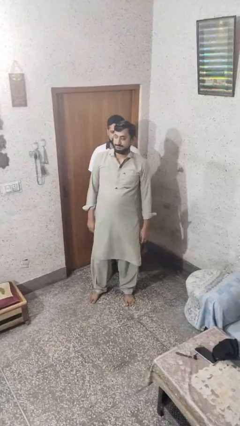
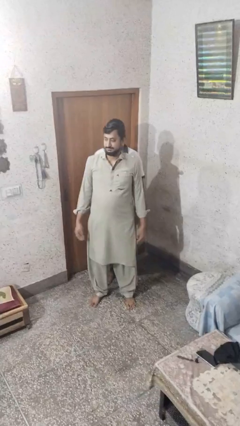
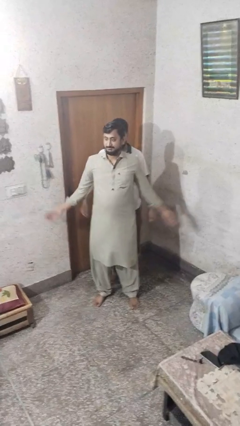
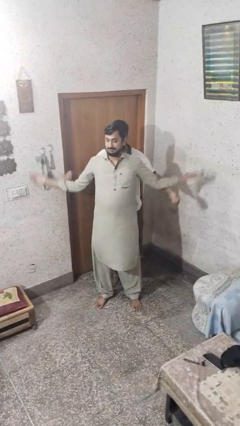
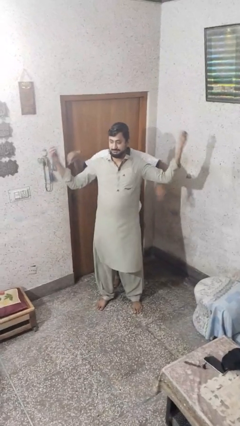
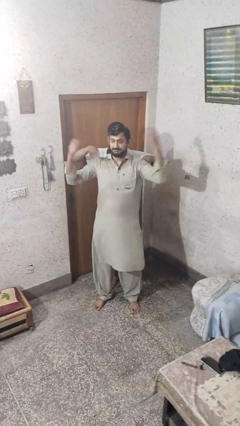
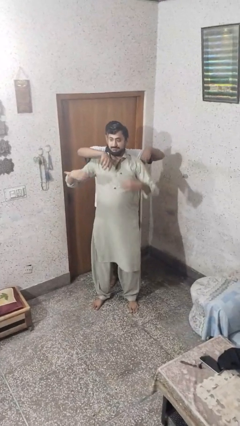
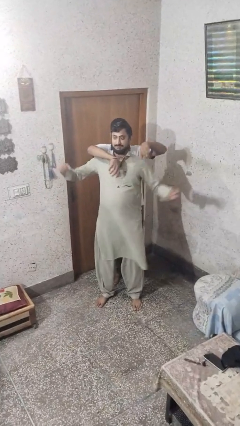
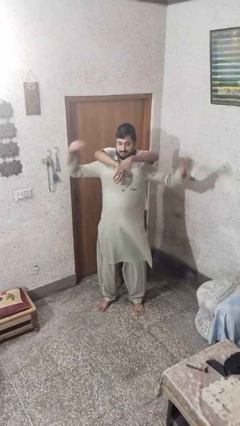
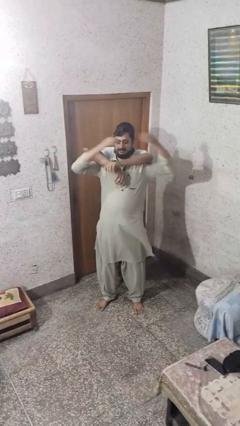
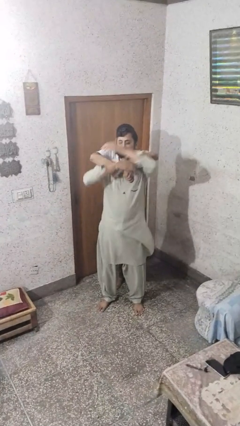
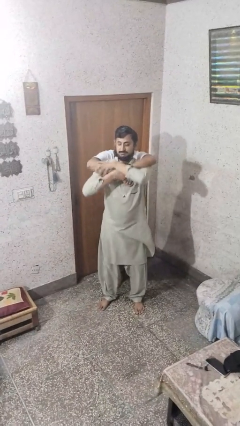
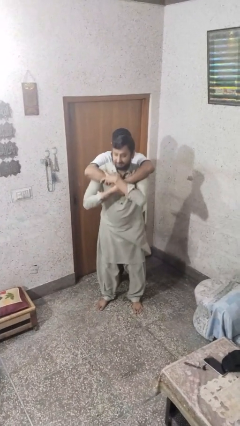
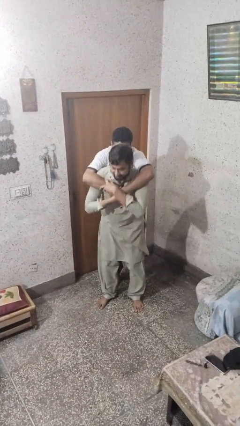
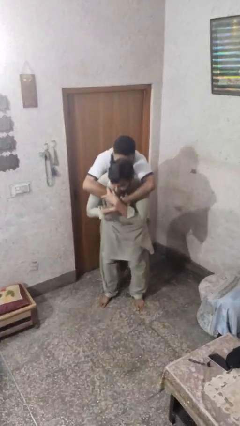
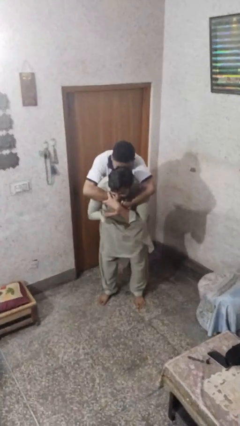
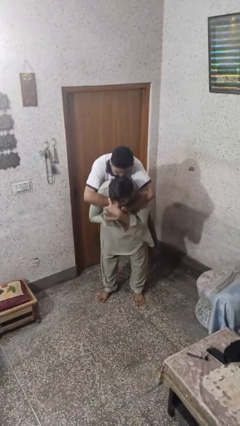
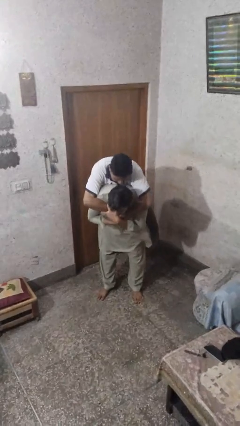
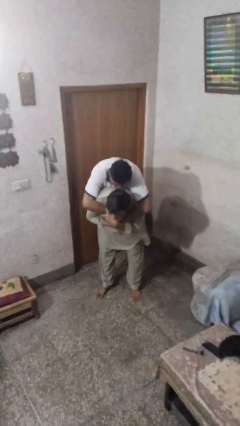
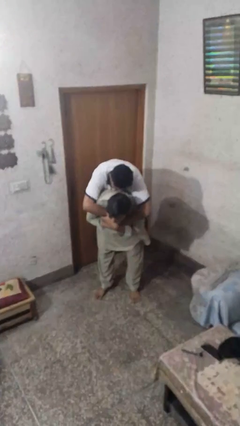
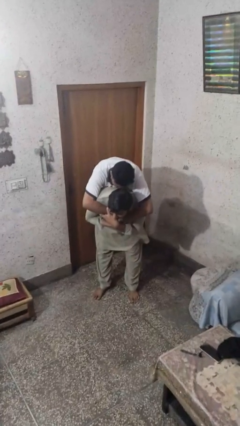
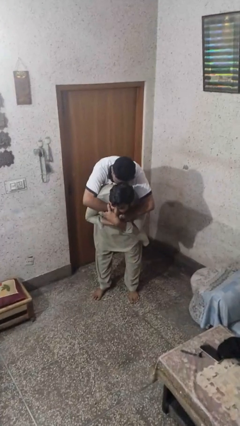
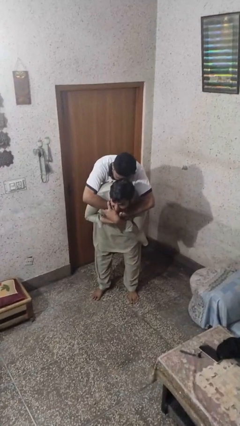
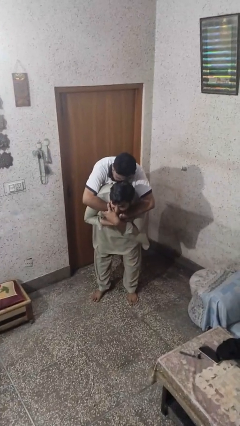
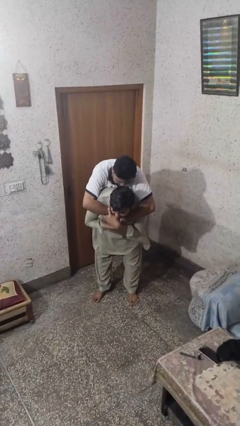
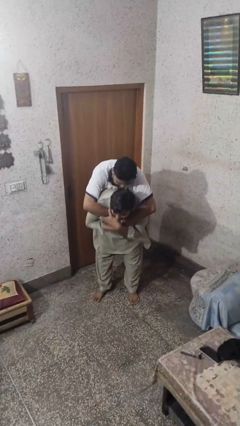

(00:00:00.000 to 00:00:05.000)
person carries person on back

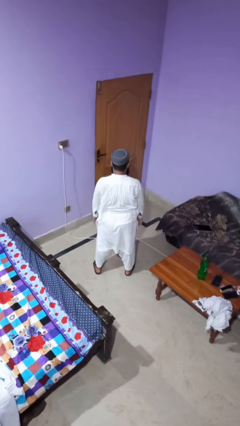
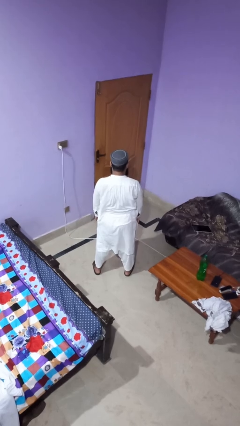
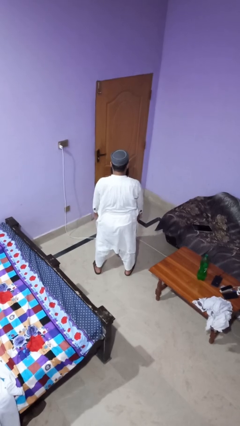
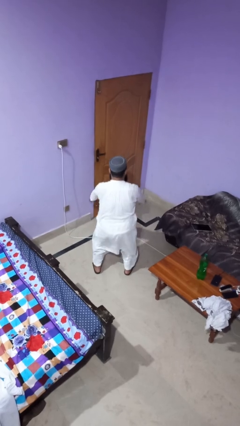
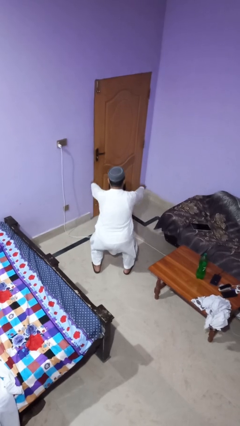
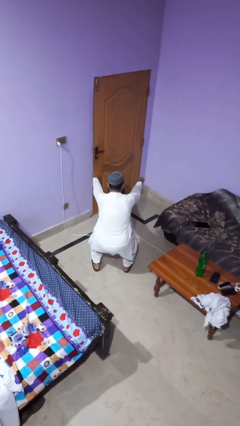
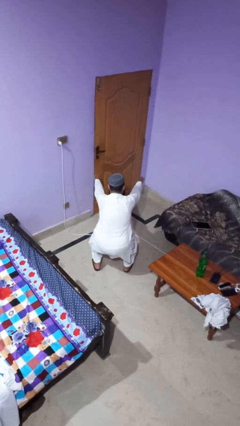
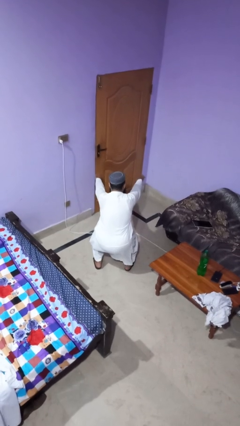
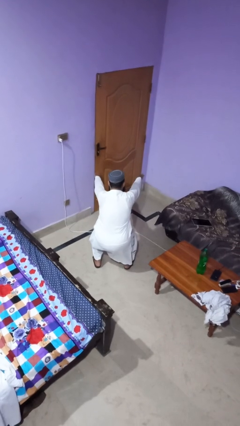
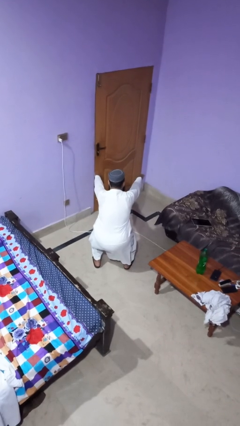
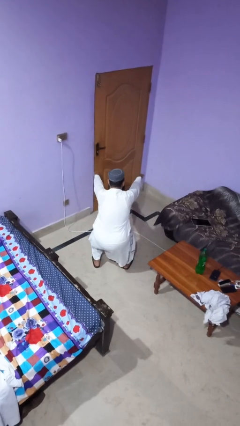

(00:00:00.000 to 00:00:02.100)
person squats

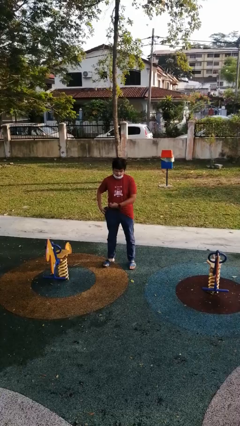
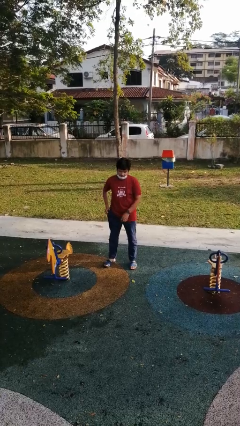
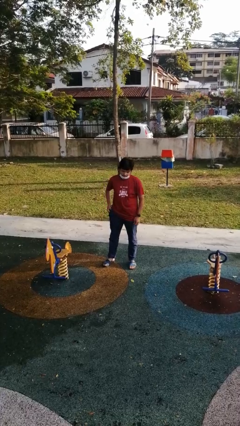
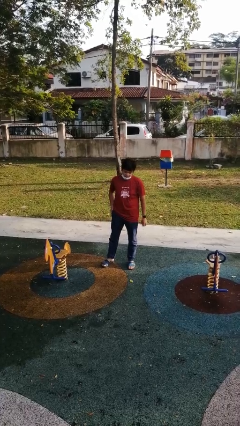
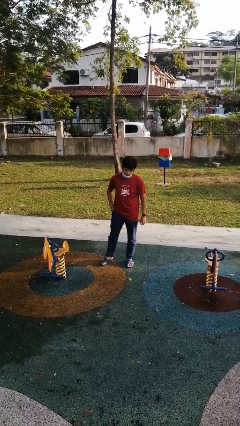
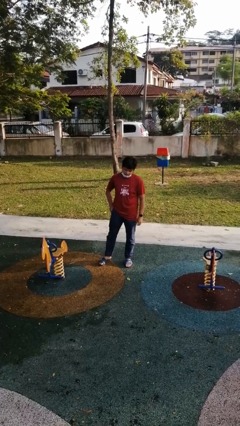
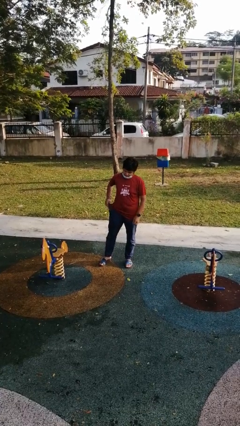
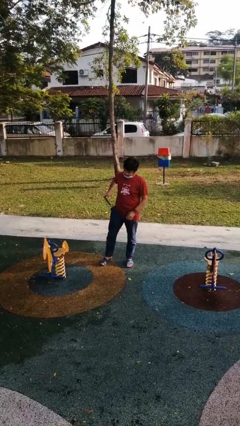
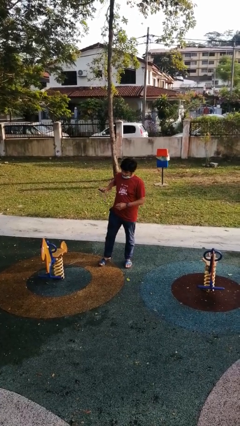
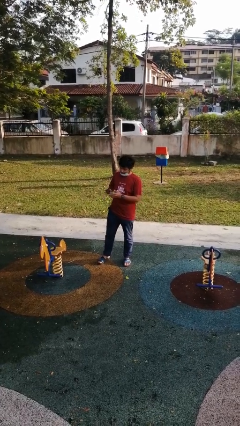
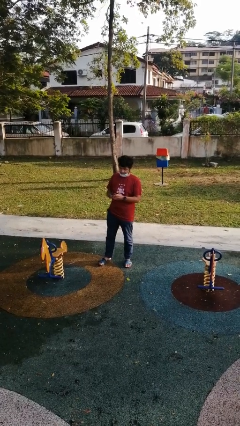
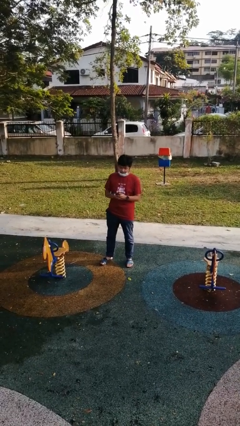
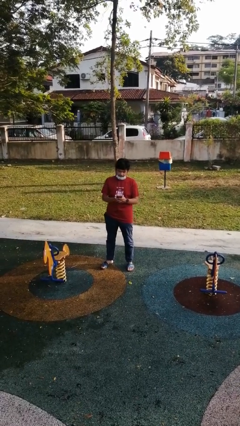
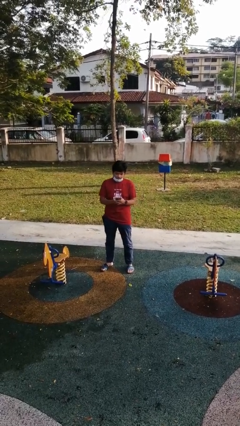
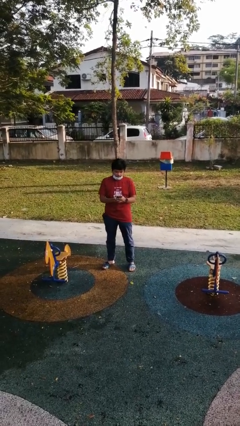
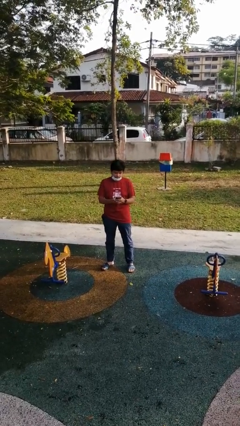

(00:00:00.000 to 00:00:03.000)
person takes phone from pocket

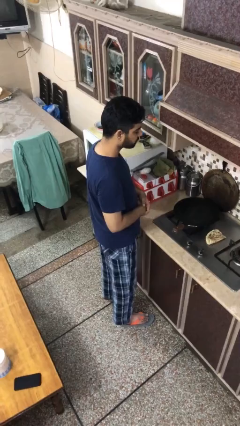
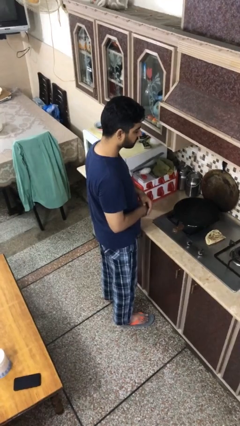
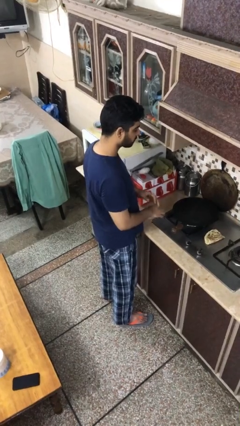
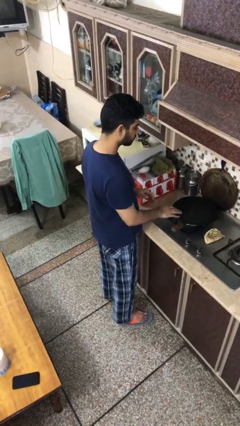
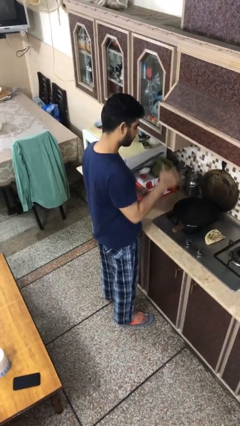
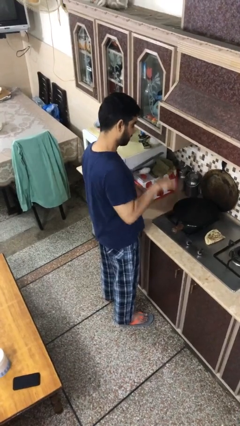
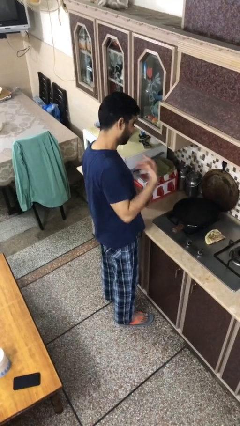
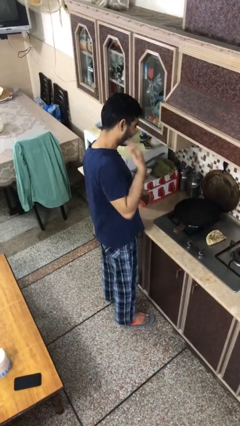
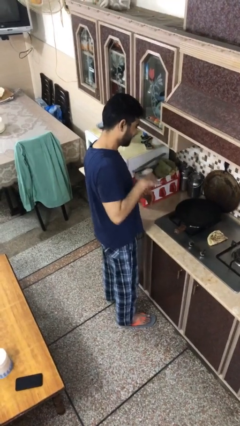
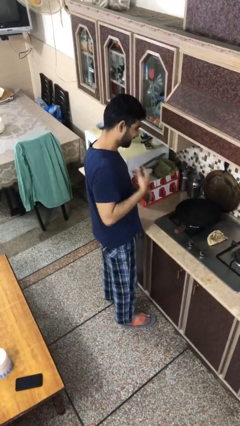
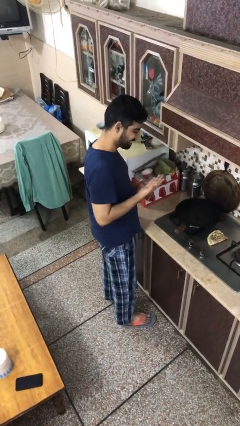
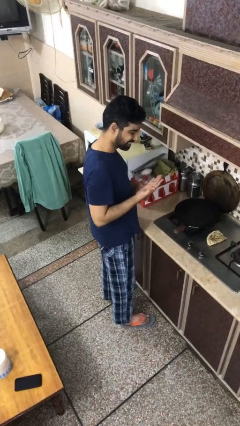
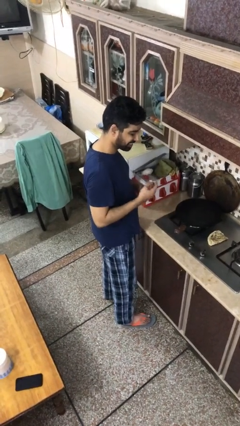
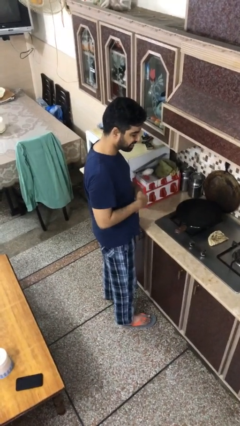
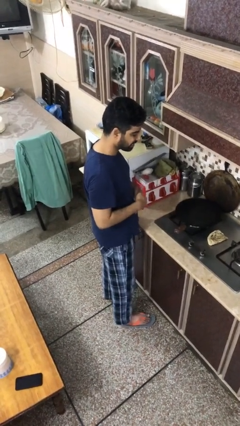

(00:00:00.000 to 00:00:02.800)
person burns hand

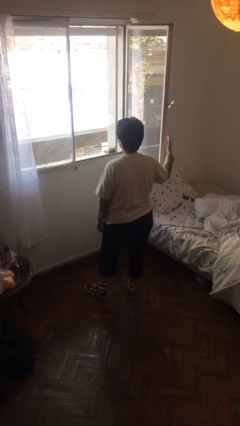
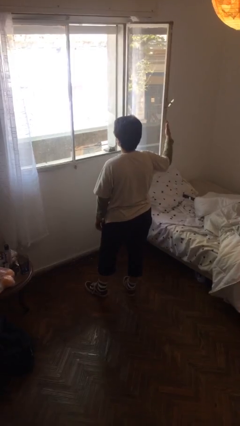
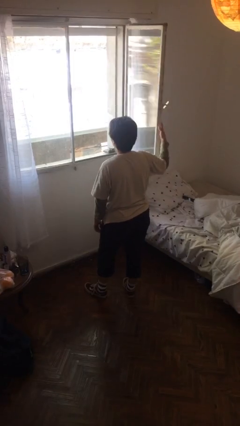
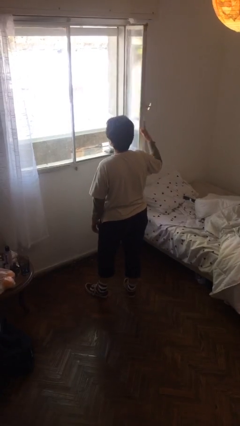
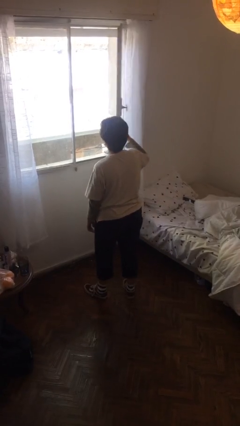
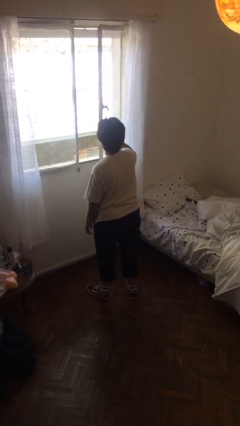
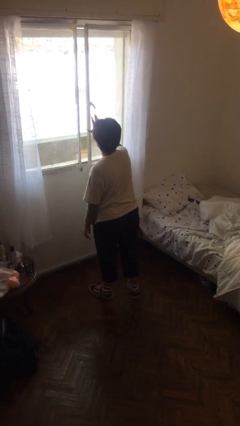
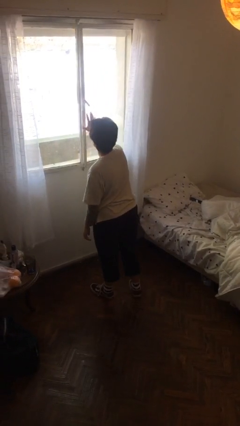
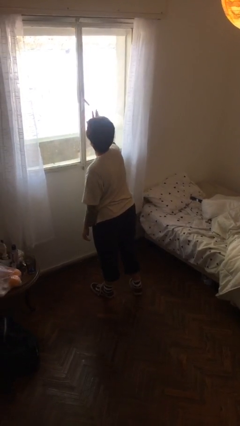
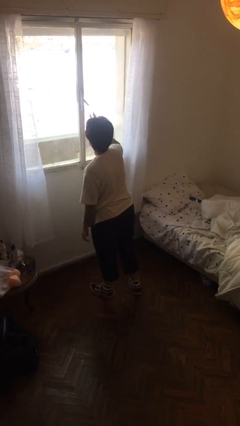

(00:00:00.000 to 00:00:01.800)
person closes home window

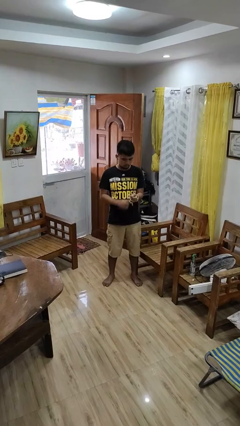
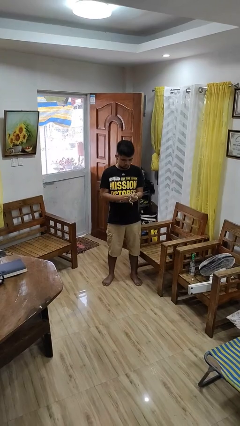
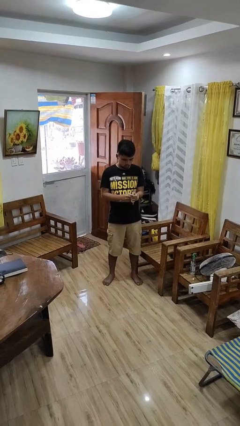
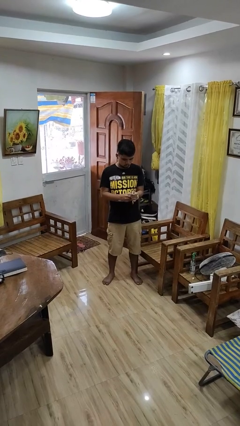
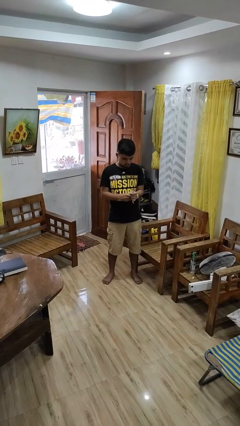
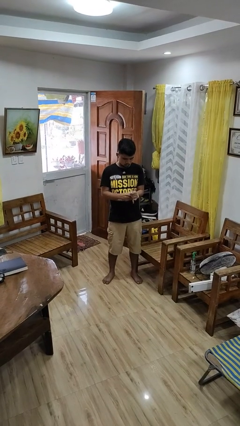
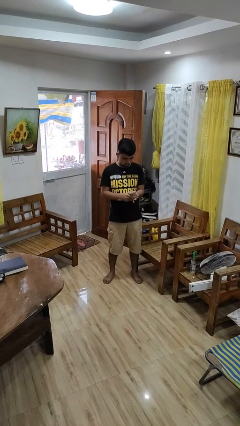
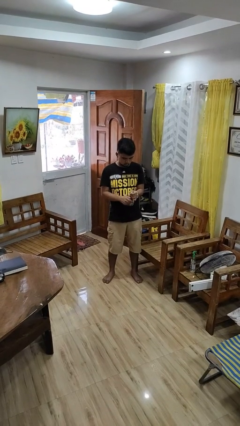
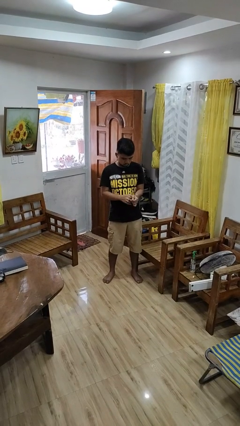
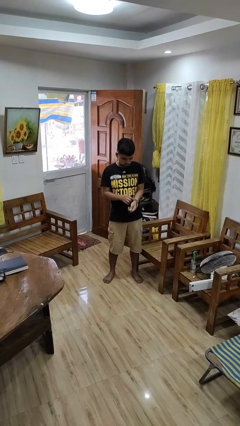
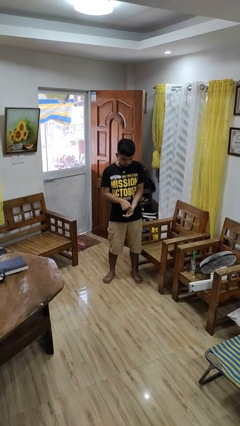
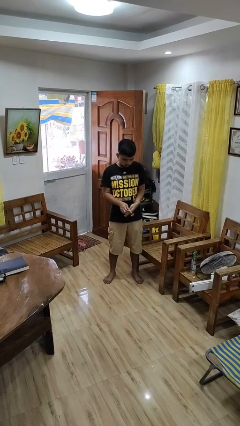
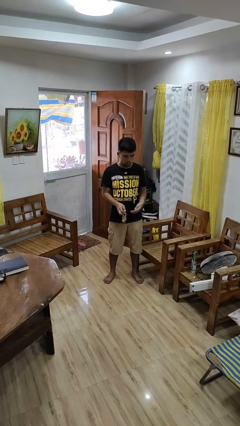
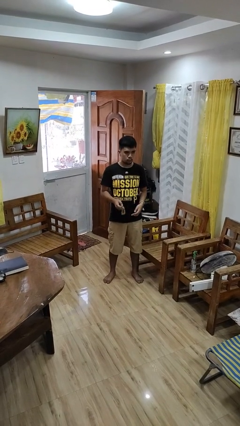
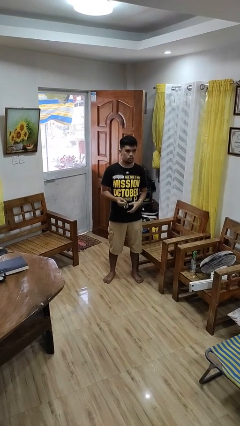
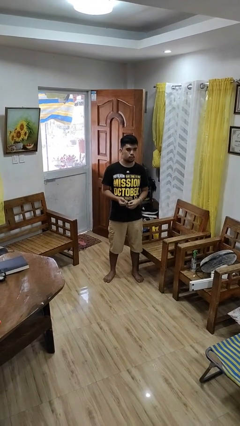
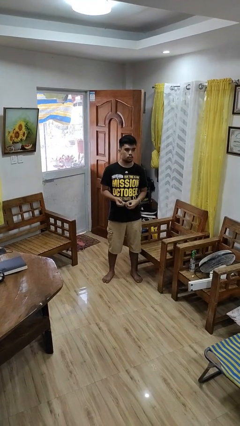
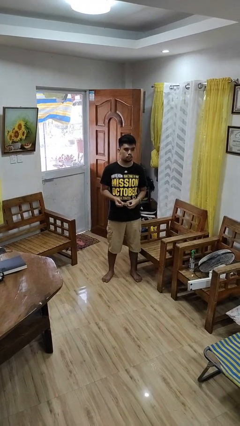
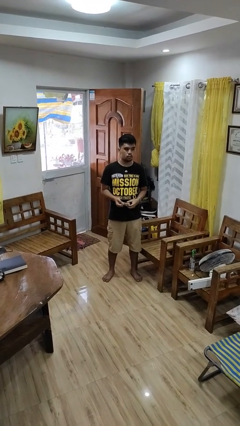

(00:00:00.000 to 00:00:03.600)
person takes off wristwatch
